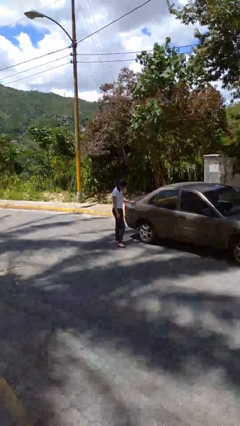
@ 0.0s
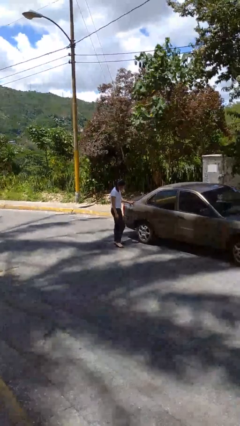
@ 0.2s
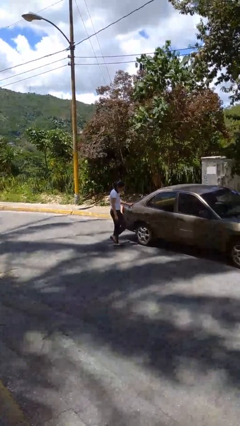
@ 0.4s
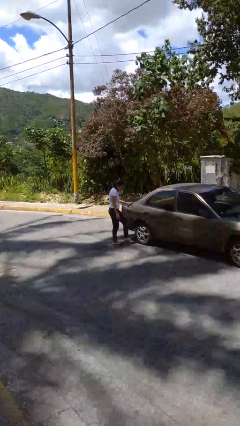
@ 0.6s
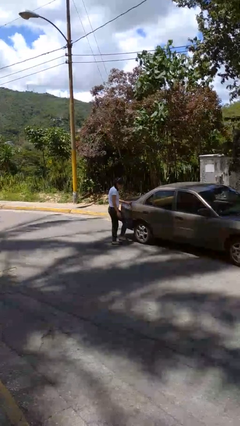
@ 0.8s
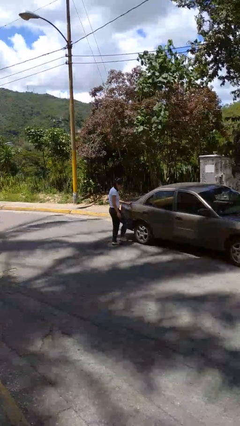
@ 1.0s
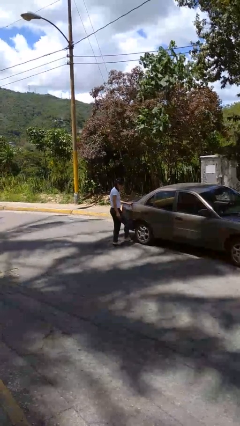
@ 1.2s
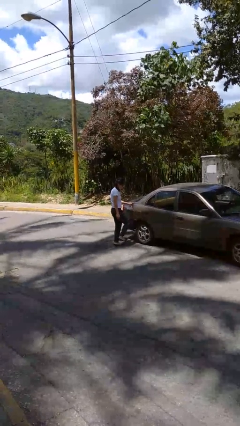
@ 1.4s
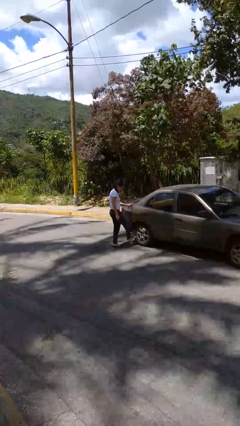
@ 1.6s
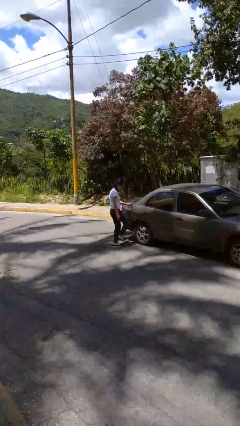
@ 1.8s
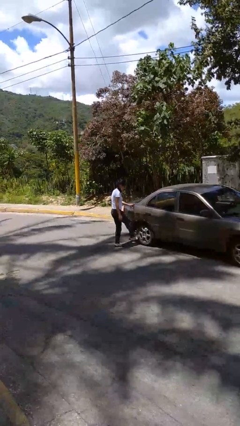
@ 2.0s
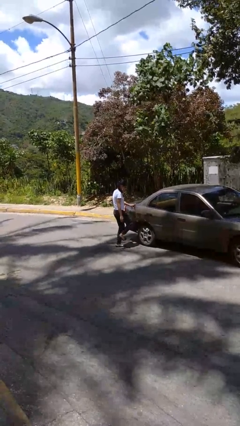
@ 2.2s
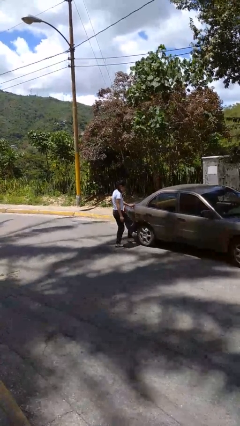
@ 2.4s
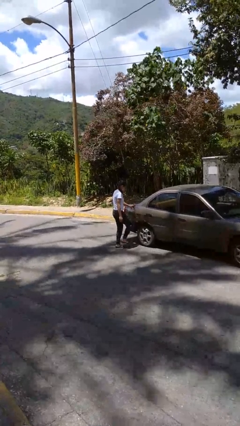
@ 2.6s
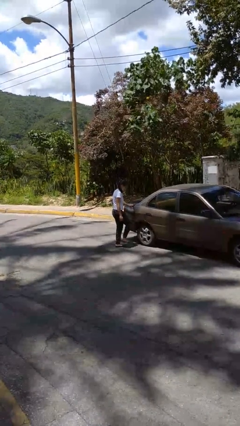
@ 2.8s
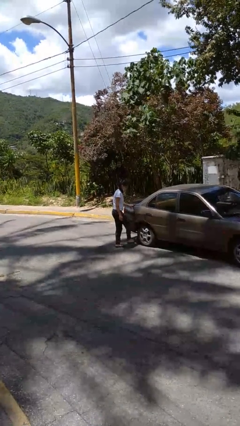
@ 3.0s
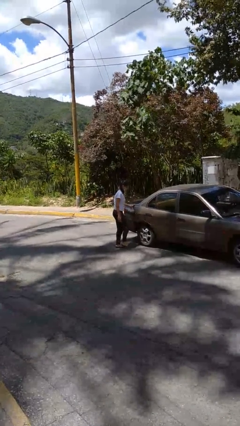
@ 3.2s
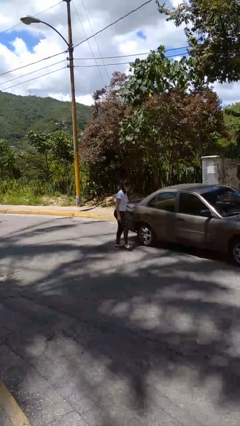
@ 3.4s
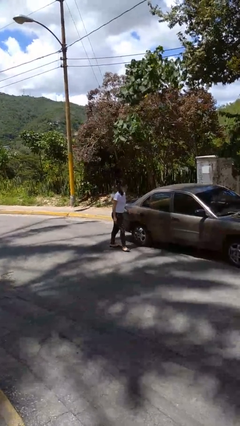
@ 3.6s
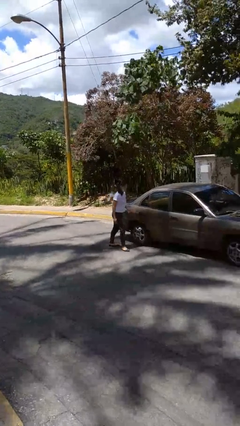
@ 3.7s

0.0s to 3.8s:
person kicks car tires

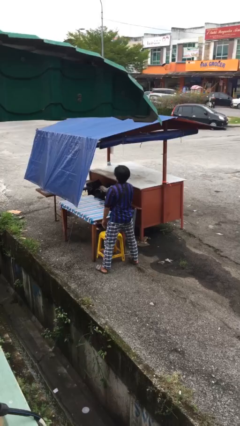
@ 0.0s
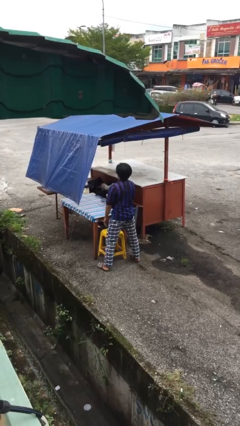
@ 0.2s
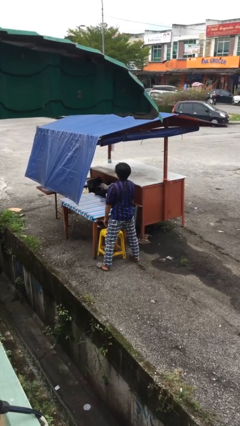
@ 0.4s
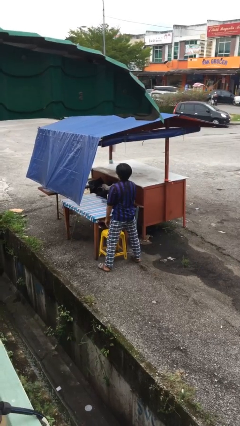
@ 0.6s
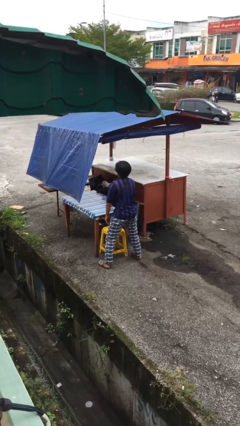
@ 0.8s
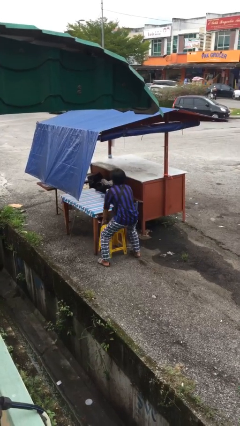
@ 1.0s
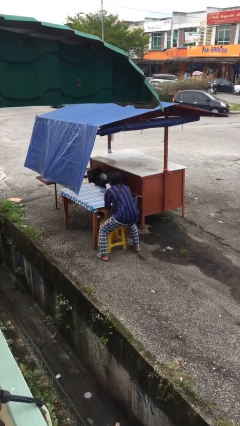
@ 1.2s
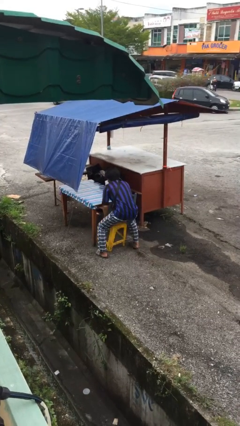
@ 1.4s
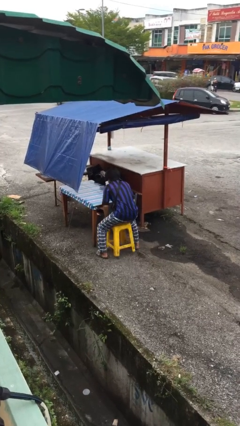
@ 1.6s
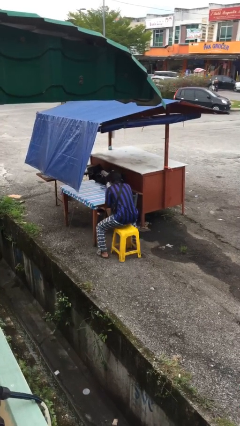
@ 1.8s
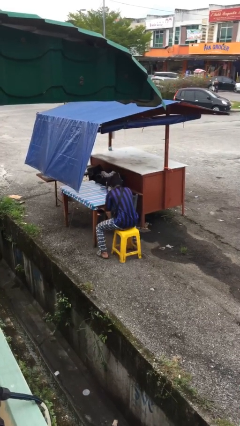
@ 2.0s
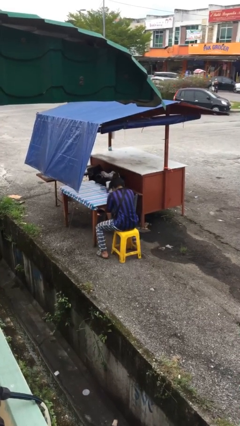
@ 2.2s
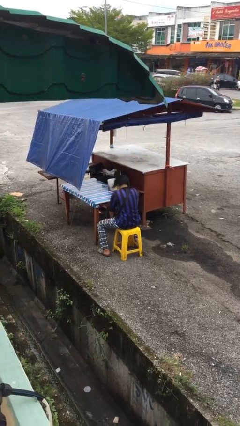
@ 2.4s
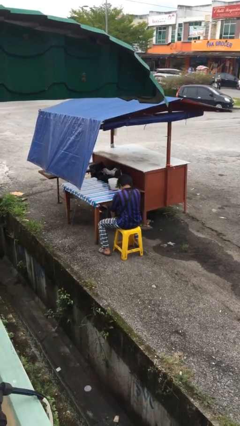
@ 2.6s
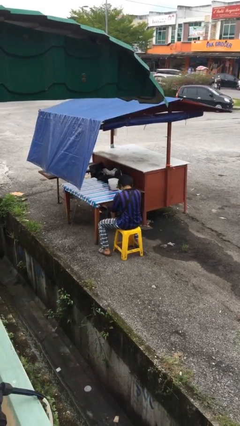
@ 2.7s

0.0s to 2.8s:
person sits down

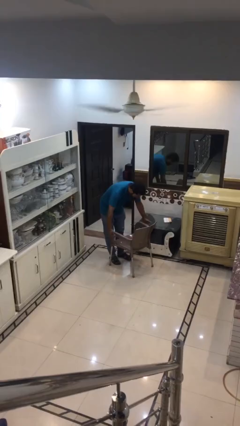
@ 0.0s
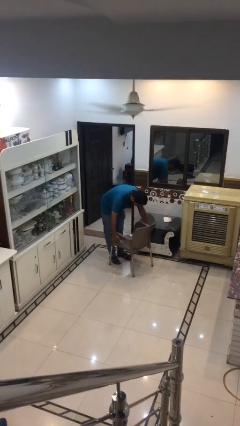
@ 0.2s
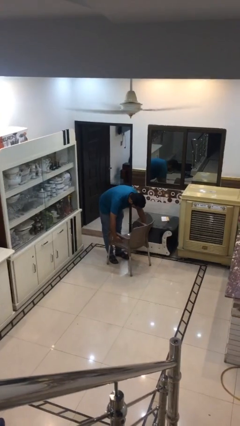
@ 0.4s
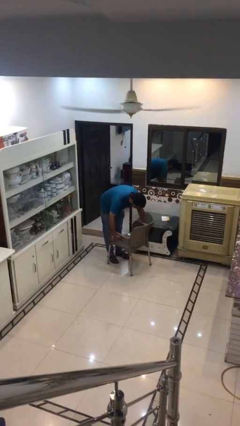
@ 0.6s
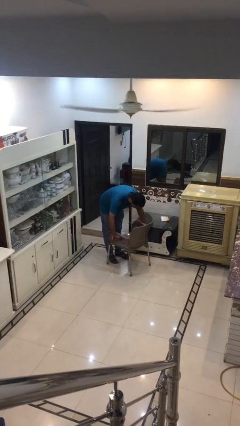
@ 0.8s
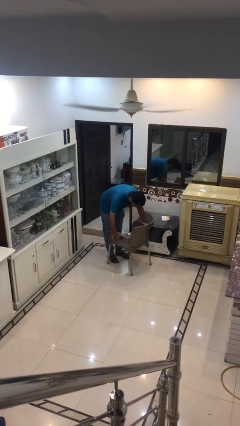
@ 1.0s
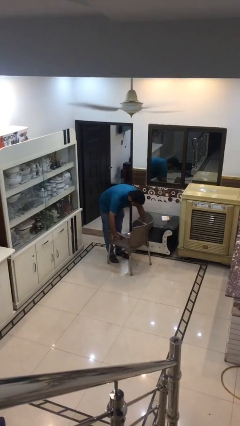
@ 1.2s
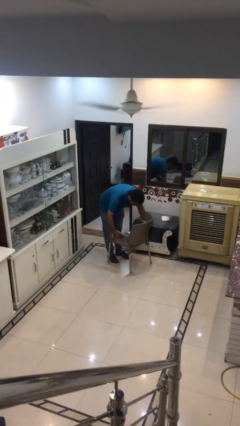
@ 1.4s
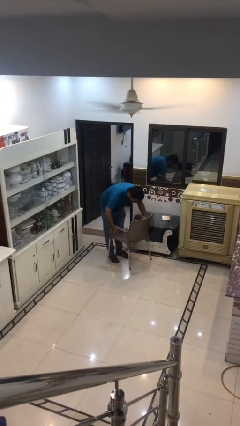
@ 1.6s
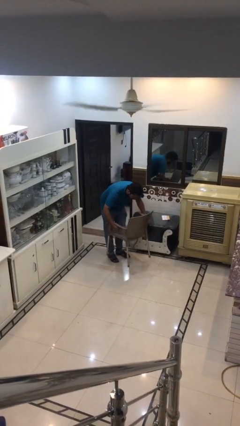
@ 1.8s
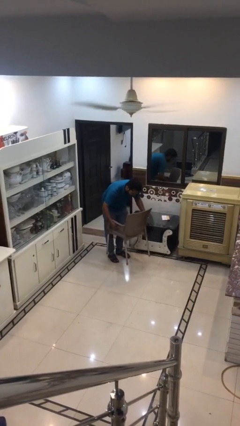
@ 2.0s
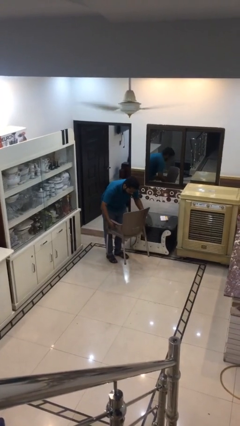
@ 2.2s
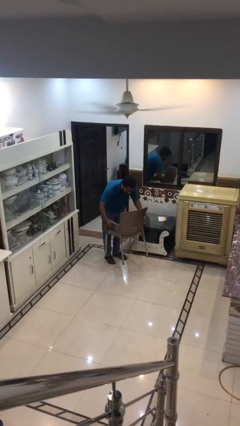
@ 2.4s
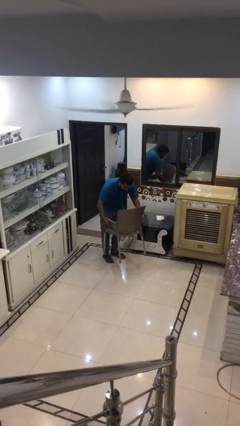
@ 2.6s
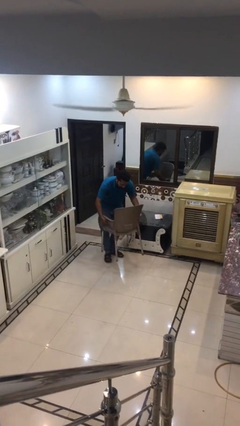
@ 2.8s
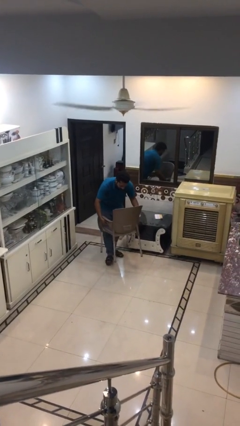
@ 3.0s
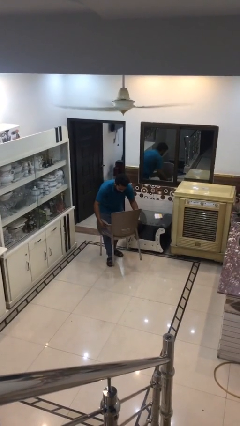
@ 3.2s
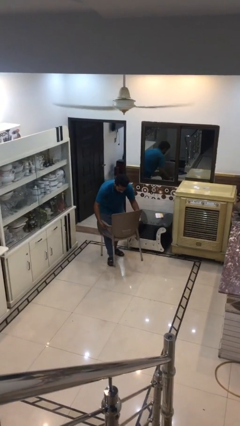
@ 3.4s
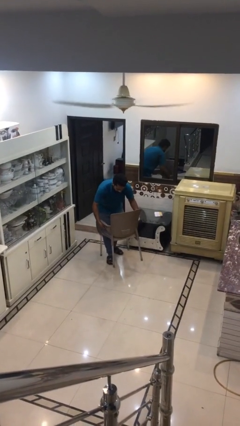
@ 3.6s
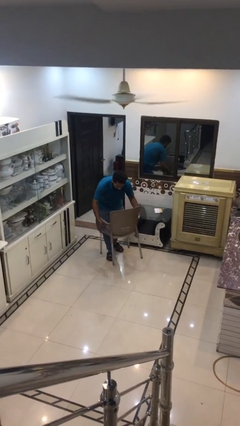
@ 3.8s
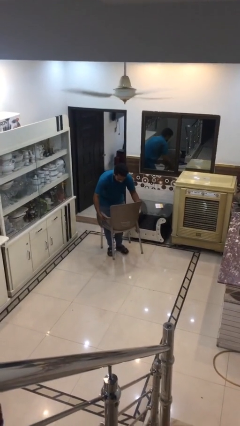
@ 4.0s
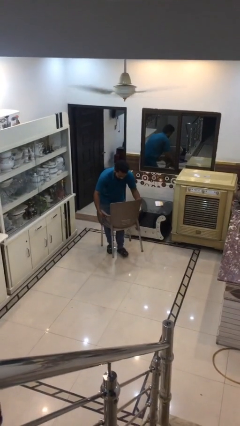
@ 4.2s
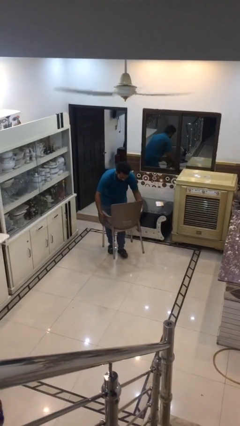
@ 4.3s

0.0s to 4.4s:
person picks up object from floor

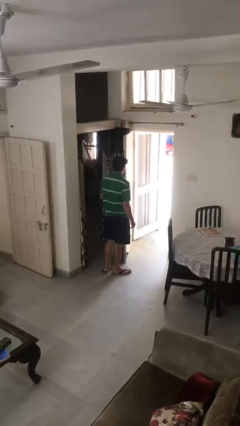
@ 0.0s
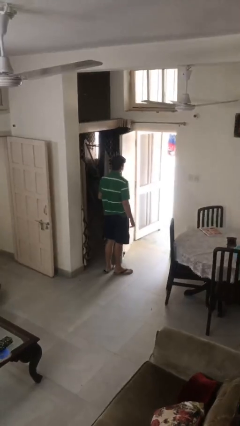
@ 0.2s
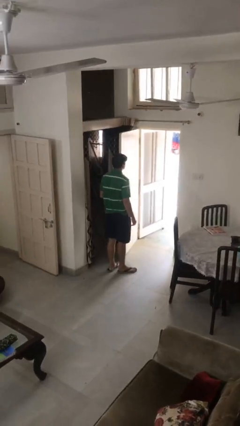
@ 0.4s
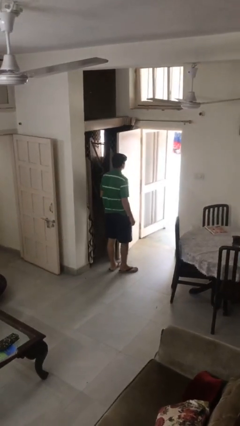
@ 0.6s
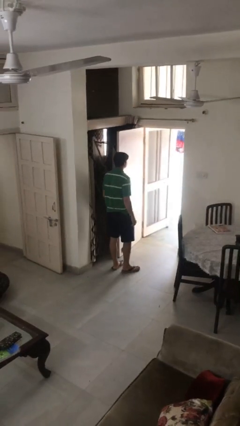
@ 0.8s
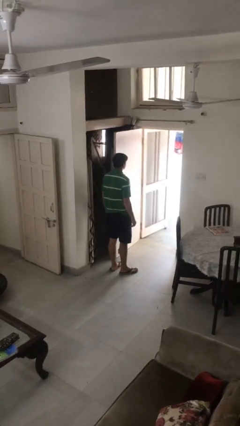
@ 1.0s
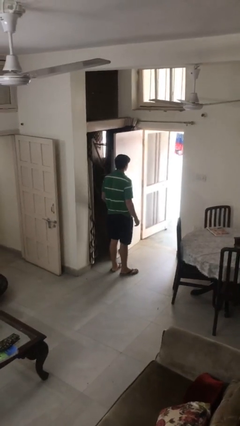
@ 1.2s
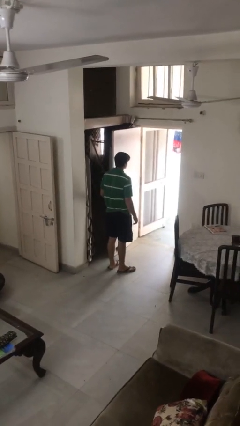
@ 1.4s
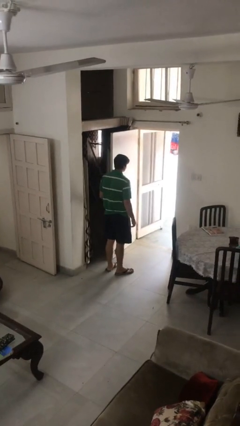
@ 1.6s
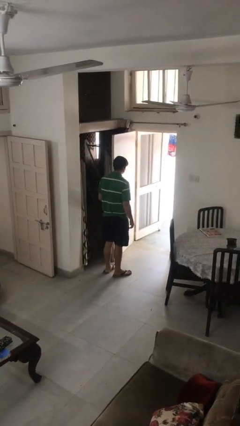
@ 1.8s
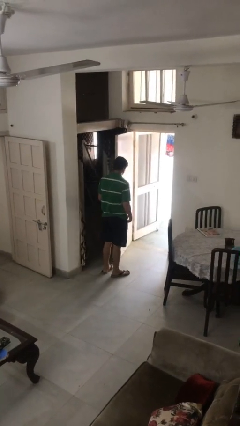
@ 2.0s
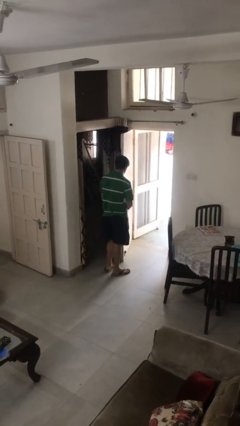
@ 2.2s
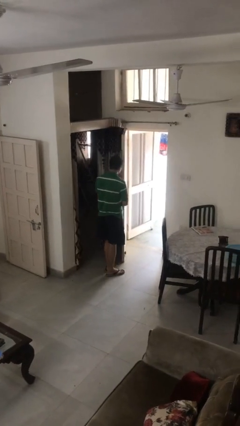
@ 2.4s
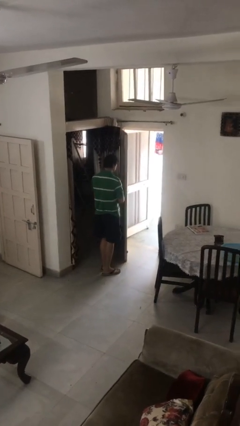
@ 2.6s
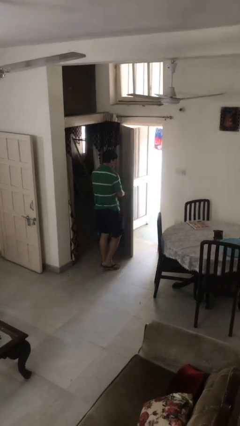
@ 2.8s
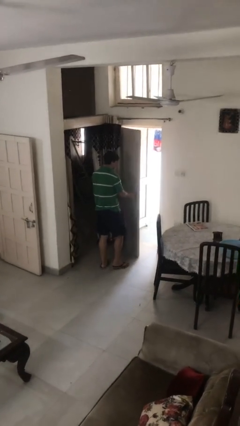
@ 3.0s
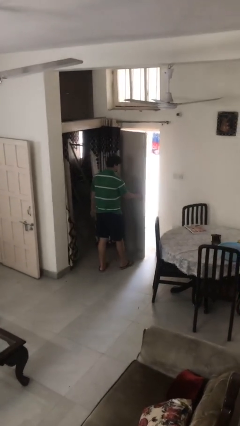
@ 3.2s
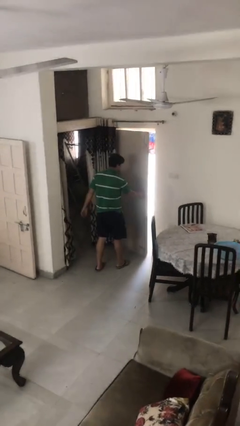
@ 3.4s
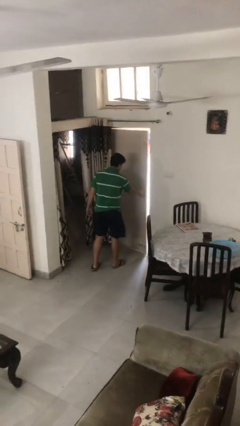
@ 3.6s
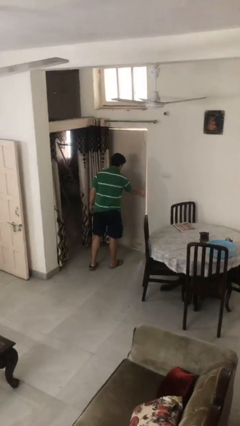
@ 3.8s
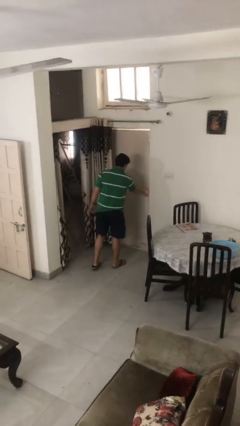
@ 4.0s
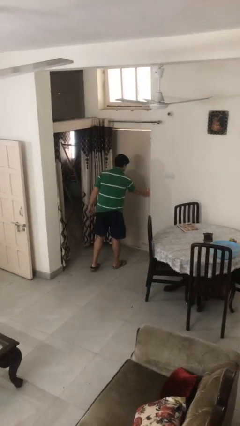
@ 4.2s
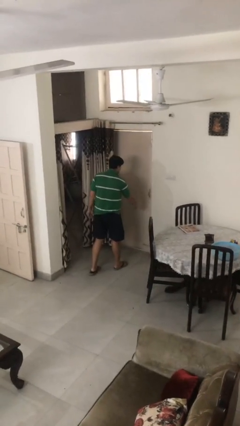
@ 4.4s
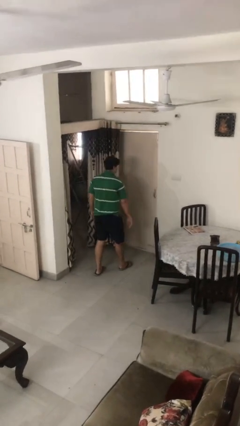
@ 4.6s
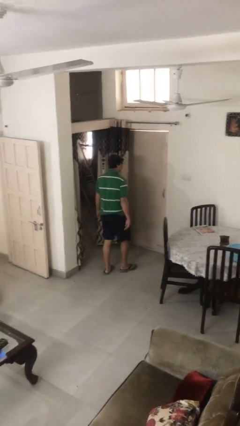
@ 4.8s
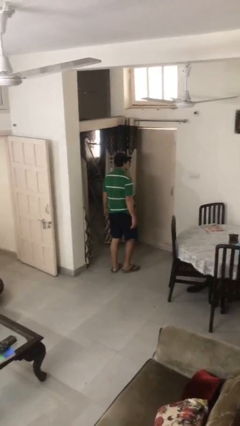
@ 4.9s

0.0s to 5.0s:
person closes facility door

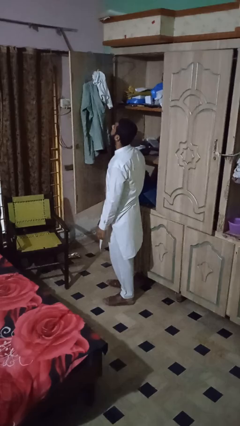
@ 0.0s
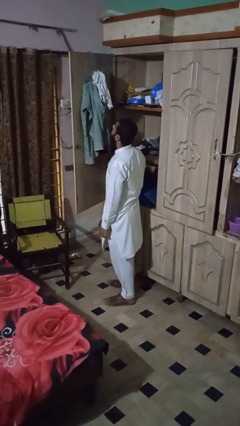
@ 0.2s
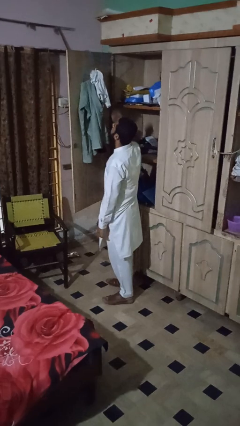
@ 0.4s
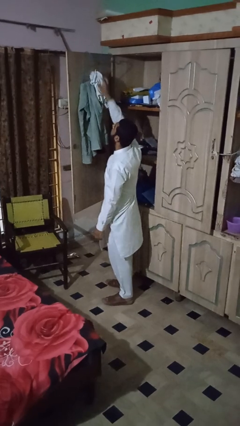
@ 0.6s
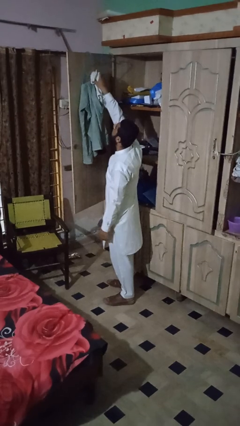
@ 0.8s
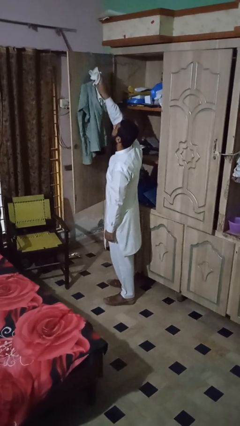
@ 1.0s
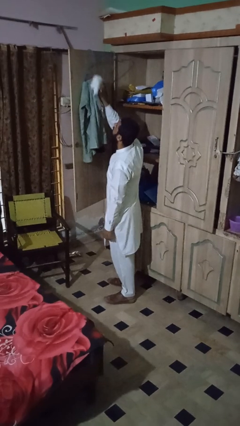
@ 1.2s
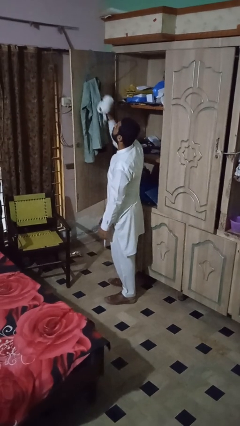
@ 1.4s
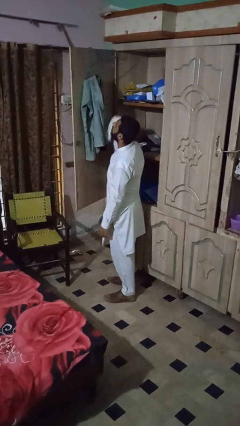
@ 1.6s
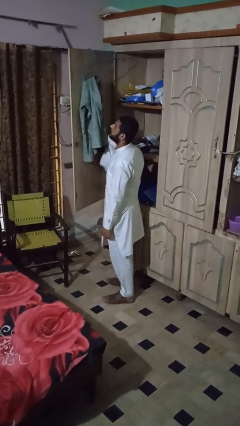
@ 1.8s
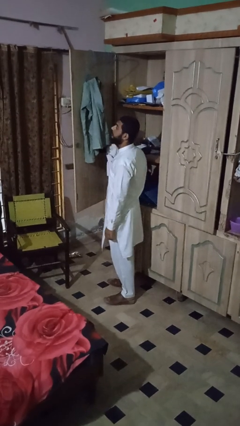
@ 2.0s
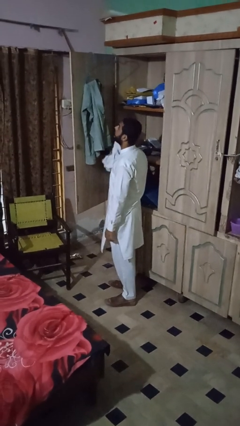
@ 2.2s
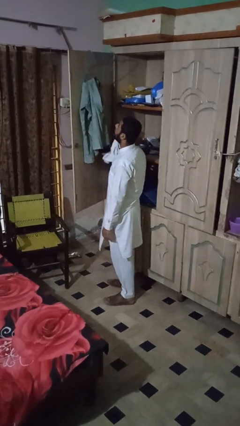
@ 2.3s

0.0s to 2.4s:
person takes clothes from closet
